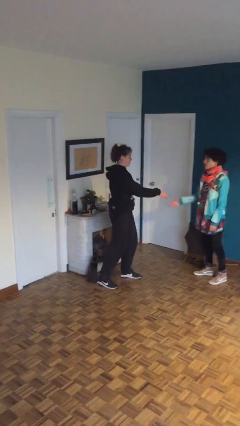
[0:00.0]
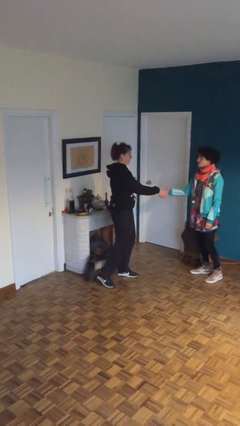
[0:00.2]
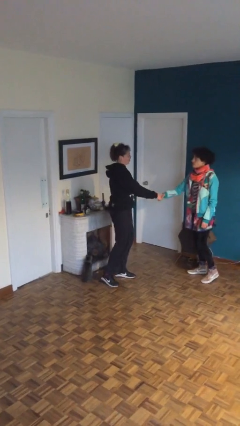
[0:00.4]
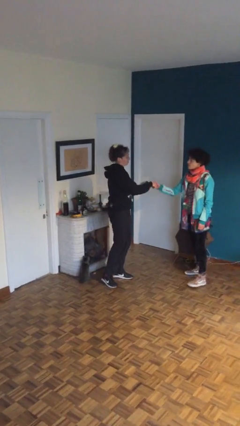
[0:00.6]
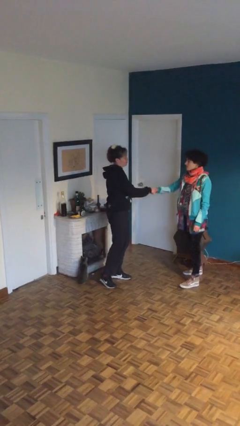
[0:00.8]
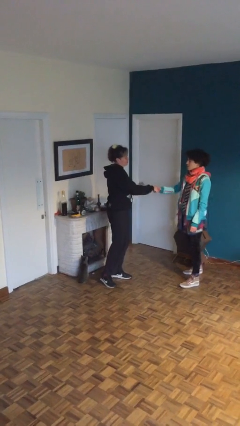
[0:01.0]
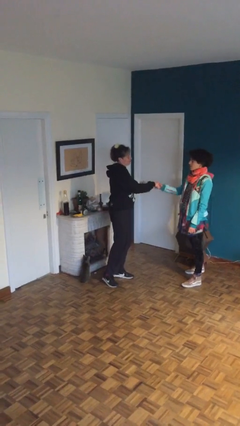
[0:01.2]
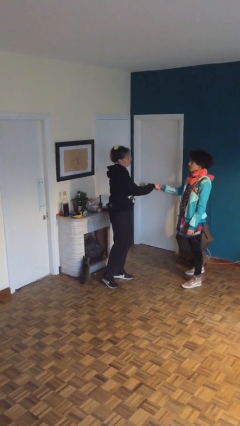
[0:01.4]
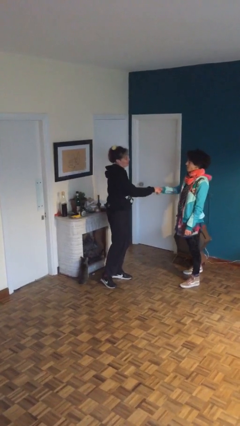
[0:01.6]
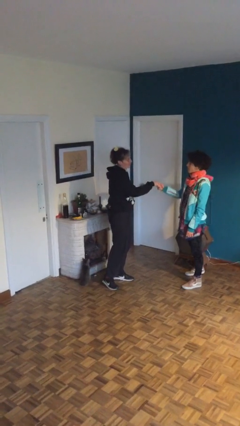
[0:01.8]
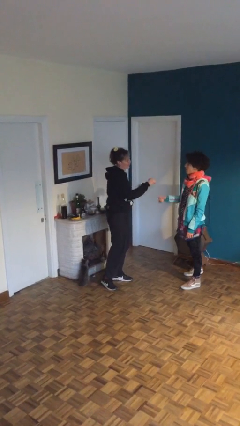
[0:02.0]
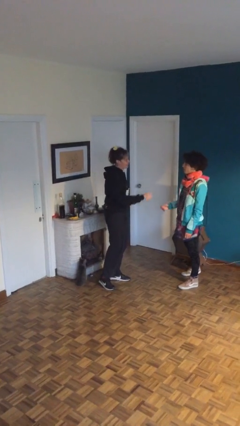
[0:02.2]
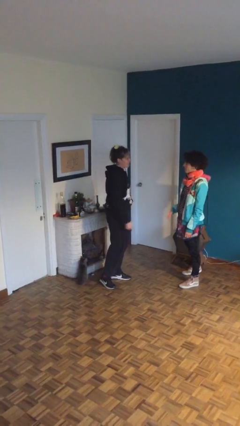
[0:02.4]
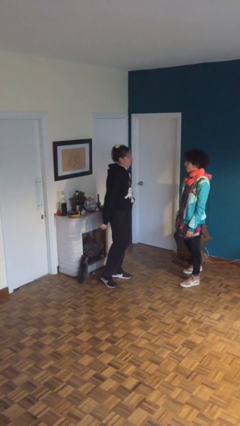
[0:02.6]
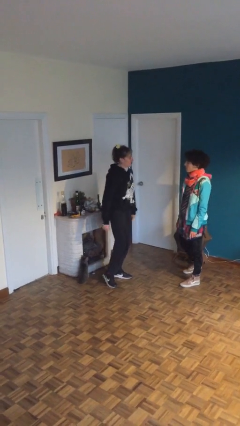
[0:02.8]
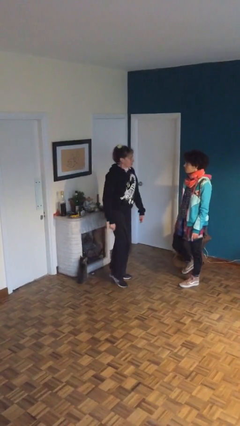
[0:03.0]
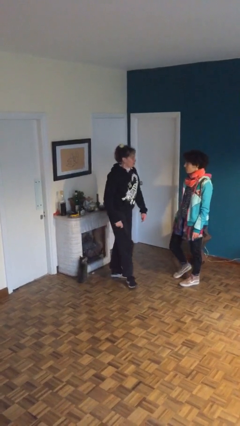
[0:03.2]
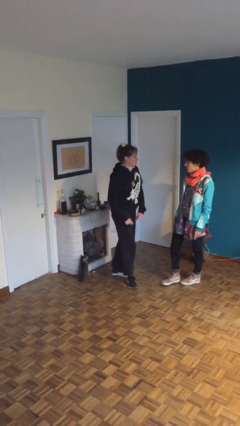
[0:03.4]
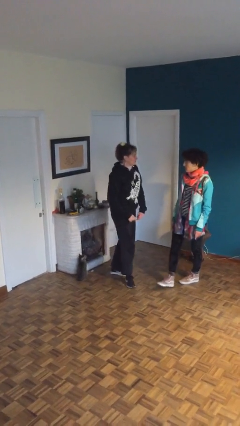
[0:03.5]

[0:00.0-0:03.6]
person shakes hand

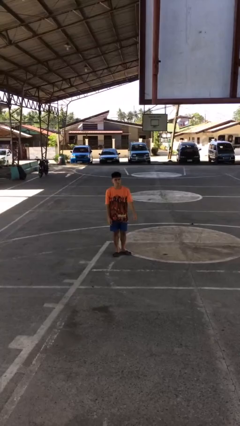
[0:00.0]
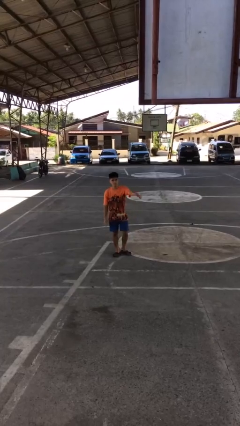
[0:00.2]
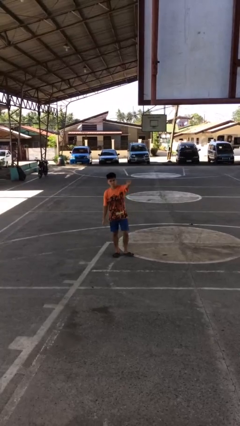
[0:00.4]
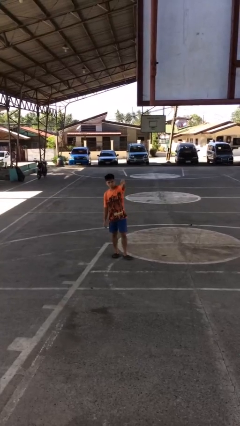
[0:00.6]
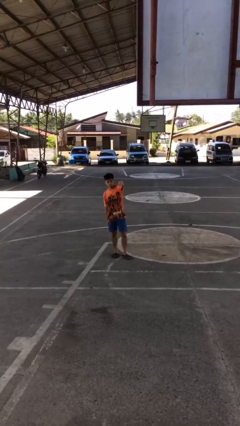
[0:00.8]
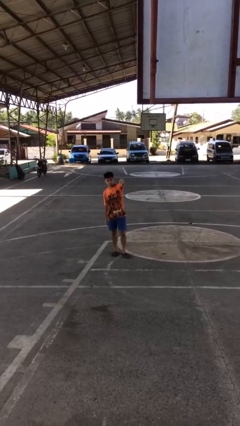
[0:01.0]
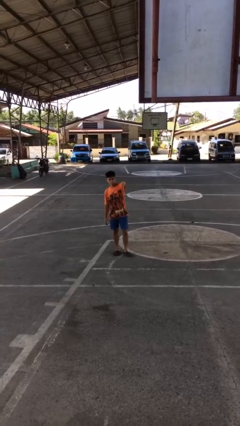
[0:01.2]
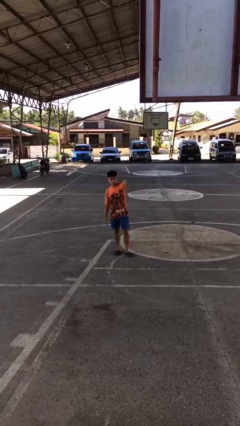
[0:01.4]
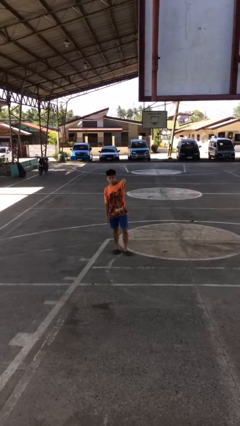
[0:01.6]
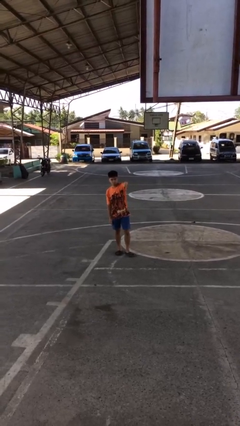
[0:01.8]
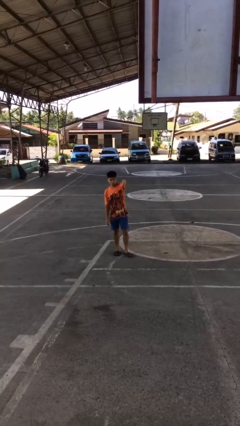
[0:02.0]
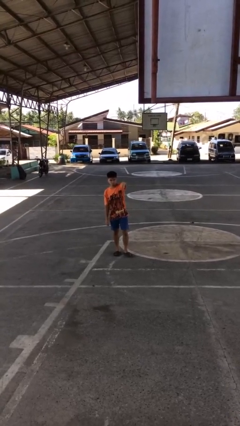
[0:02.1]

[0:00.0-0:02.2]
person gestures thumbs down

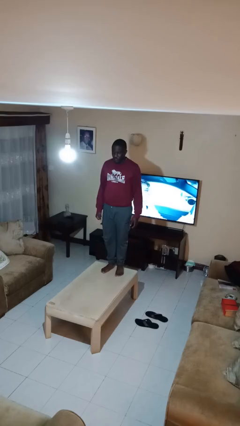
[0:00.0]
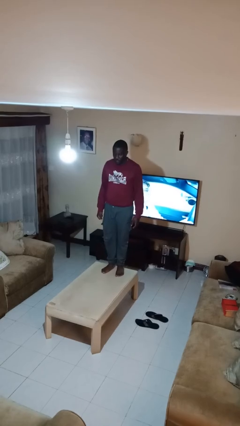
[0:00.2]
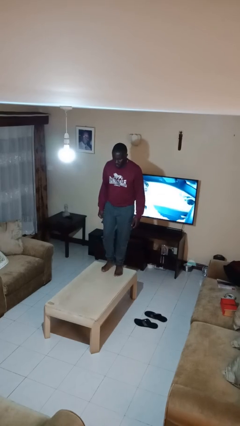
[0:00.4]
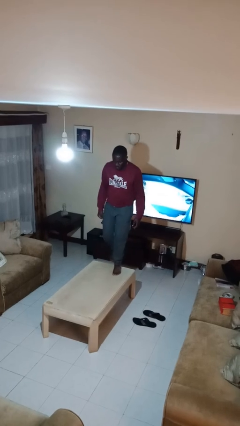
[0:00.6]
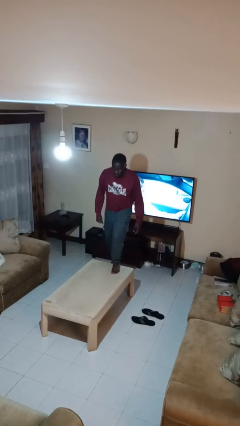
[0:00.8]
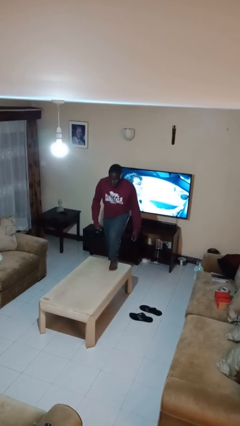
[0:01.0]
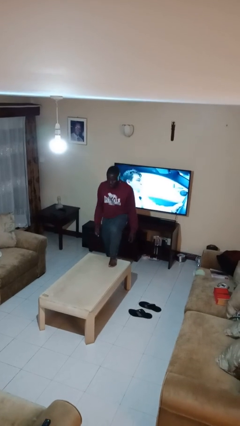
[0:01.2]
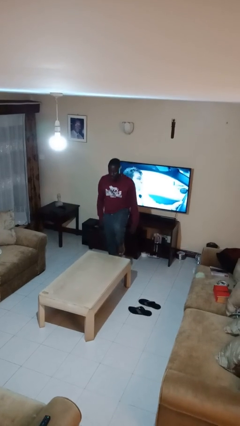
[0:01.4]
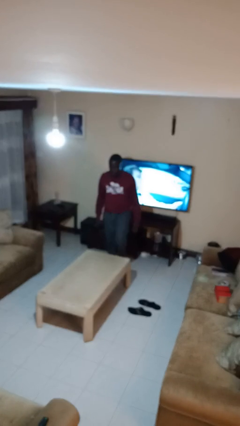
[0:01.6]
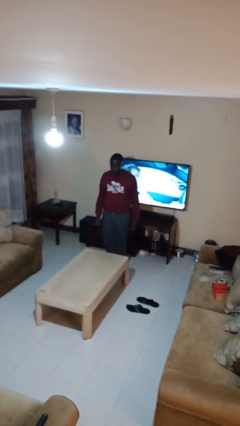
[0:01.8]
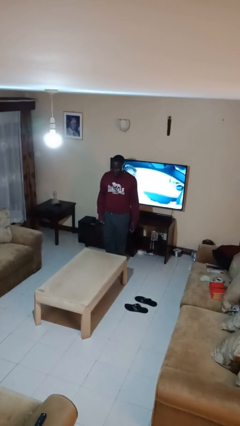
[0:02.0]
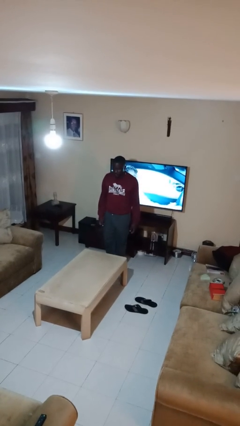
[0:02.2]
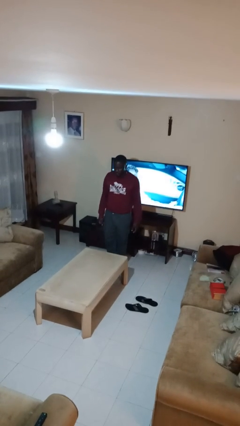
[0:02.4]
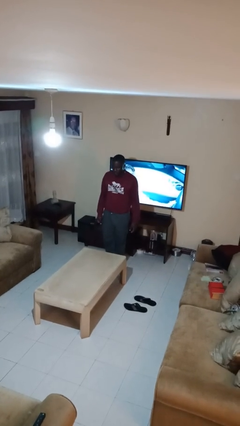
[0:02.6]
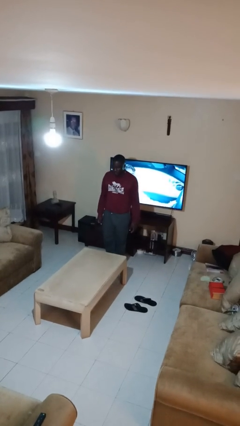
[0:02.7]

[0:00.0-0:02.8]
person climbs off table

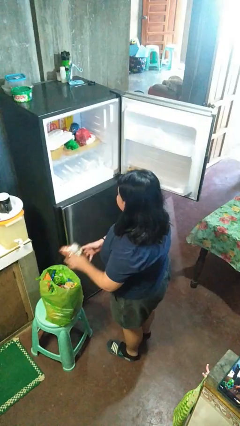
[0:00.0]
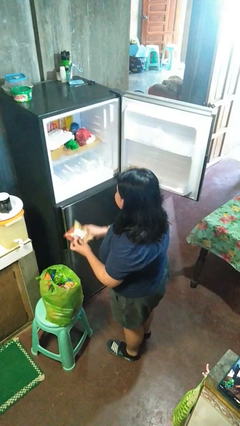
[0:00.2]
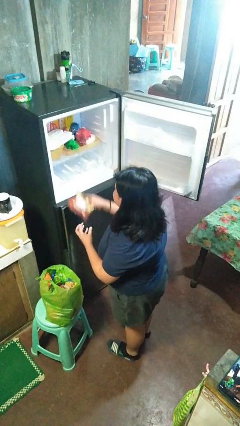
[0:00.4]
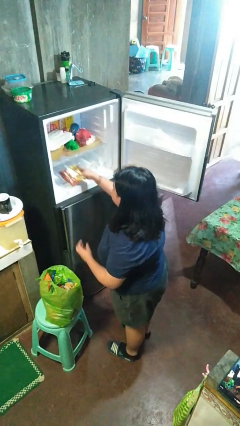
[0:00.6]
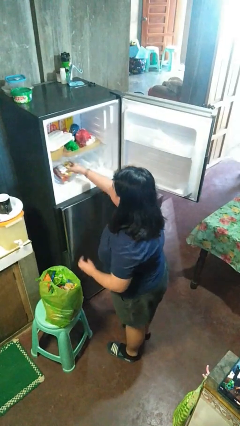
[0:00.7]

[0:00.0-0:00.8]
person loads groceries into refrigerator

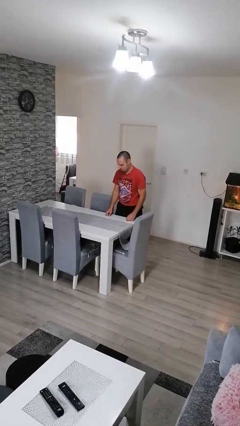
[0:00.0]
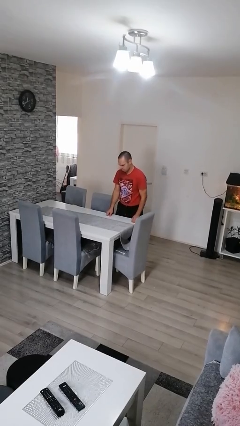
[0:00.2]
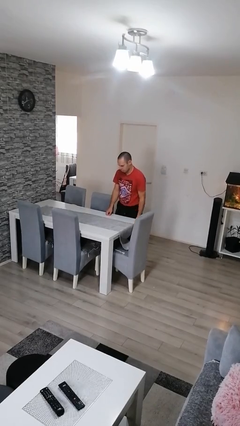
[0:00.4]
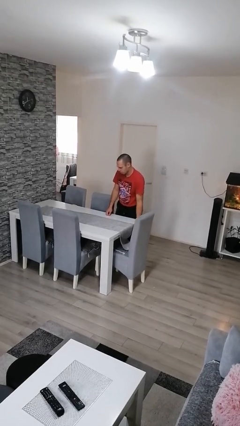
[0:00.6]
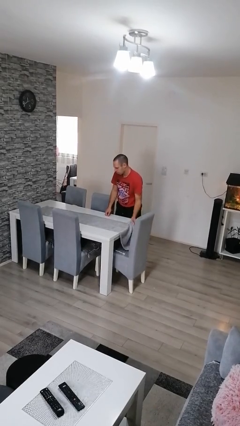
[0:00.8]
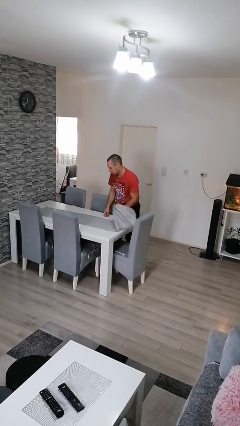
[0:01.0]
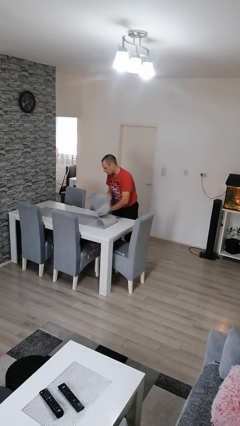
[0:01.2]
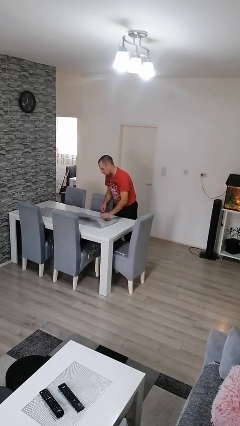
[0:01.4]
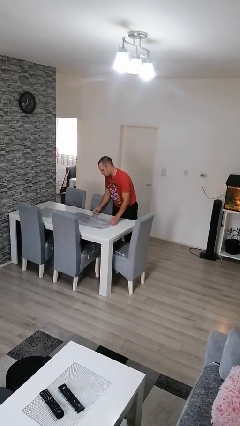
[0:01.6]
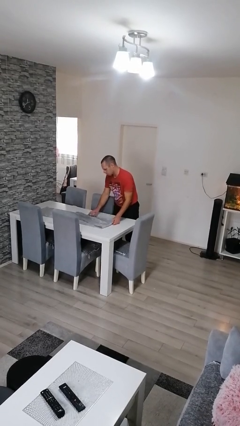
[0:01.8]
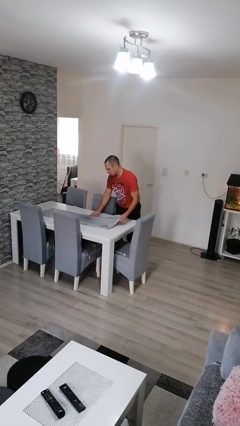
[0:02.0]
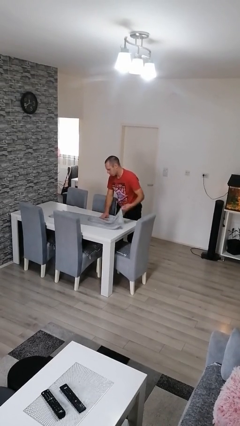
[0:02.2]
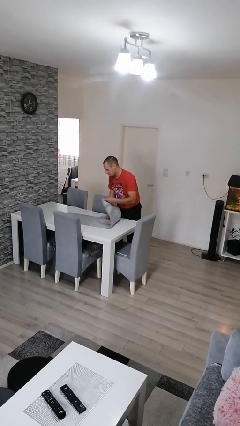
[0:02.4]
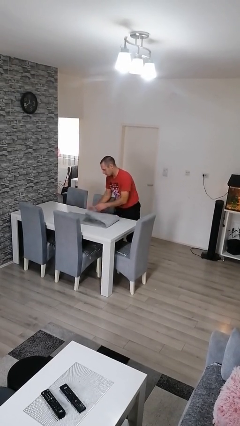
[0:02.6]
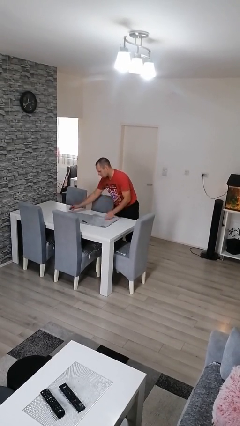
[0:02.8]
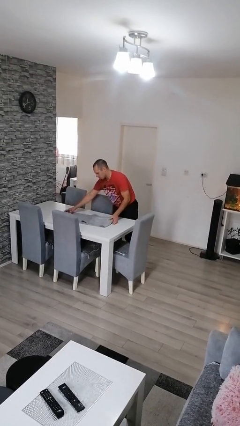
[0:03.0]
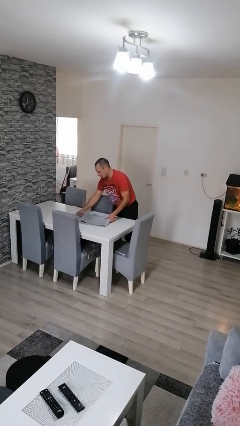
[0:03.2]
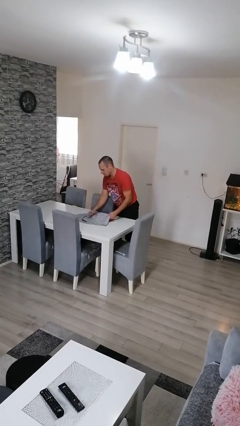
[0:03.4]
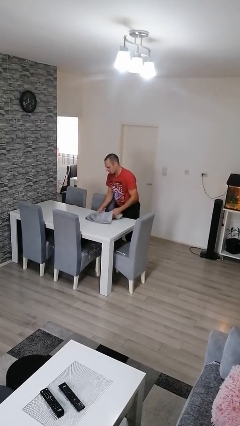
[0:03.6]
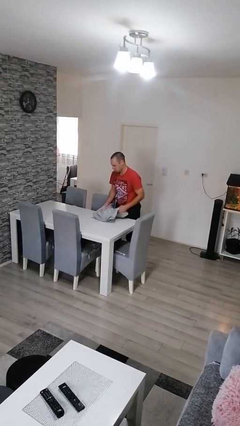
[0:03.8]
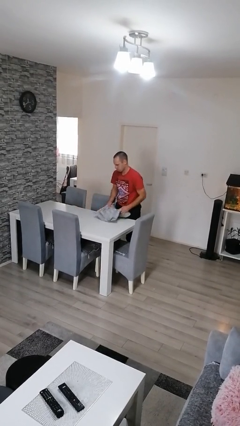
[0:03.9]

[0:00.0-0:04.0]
person folds tablecloth

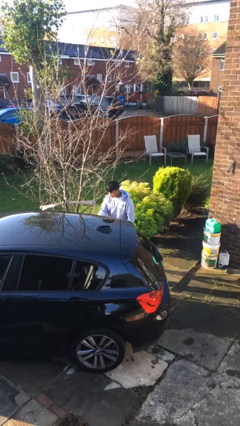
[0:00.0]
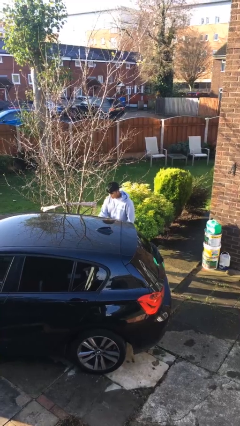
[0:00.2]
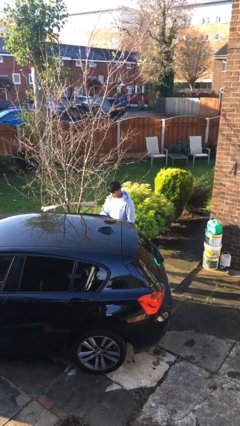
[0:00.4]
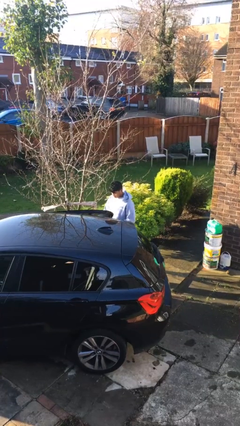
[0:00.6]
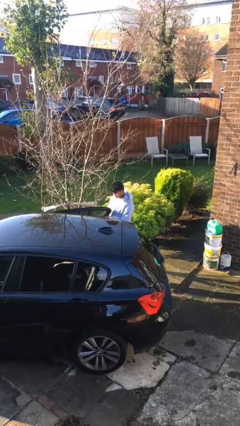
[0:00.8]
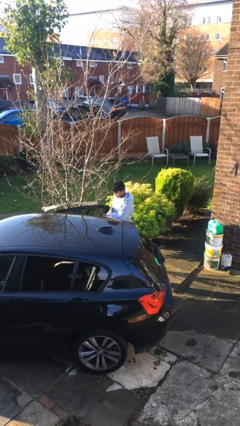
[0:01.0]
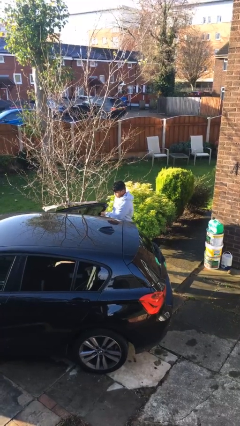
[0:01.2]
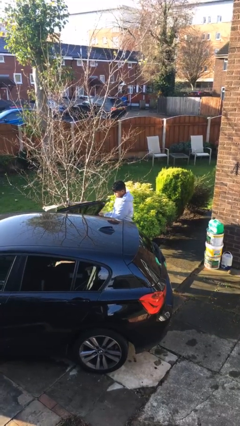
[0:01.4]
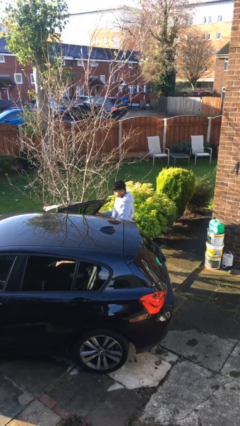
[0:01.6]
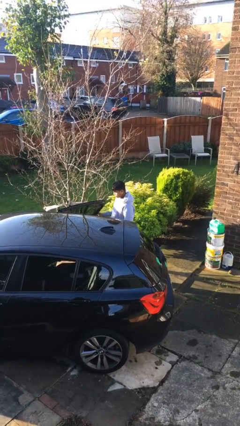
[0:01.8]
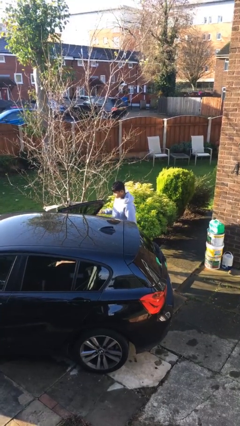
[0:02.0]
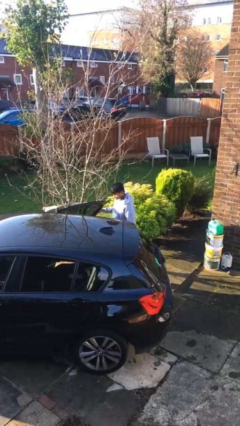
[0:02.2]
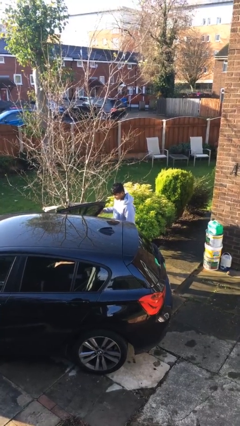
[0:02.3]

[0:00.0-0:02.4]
person opens car door

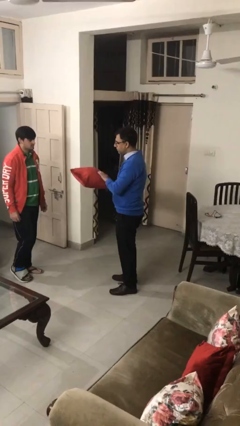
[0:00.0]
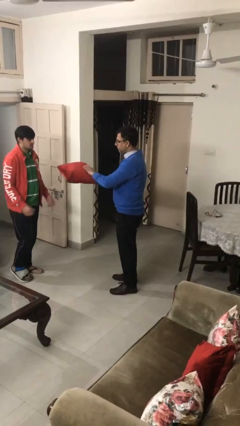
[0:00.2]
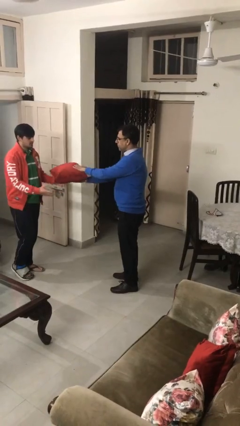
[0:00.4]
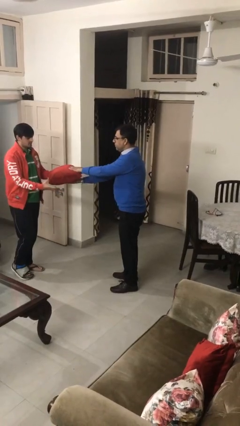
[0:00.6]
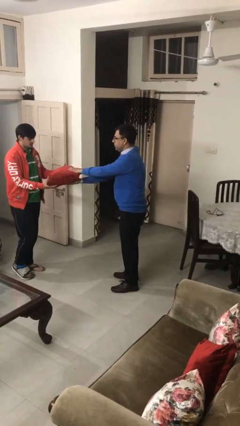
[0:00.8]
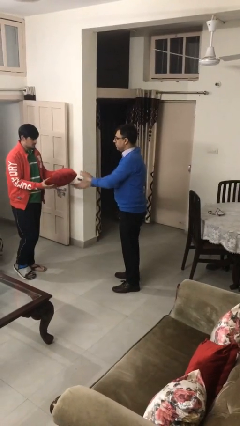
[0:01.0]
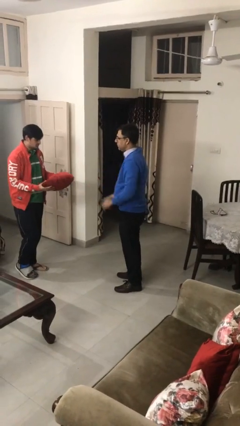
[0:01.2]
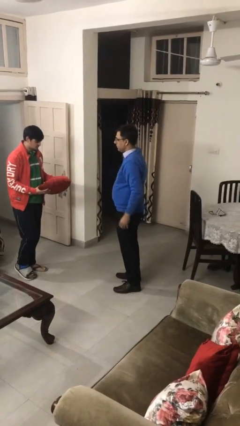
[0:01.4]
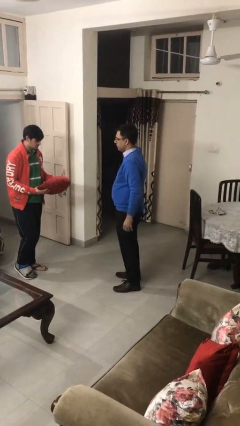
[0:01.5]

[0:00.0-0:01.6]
person transfers object to person
